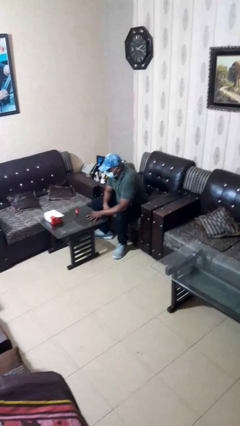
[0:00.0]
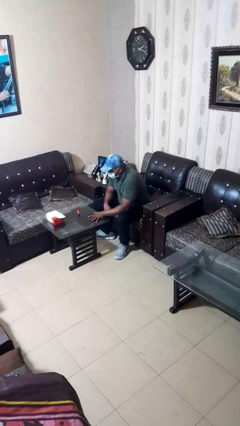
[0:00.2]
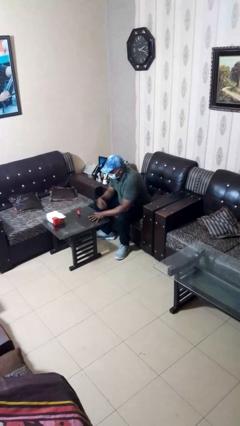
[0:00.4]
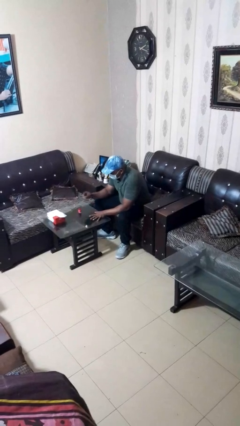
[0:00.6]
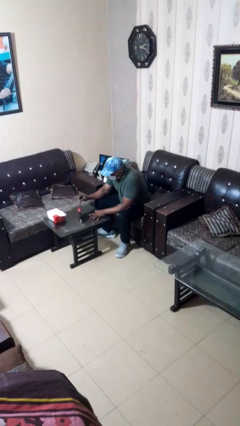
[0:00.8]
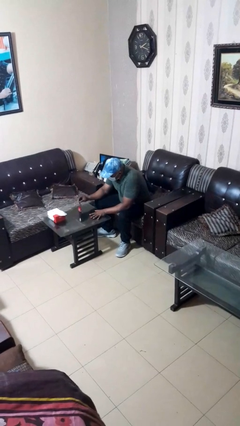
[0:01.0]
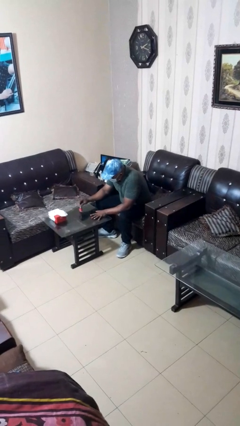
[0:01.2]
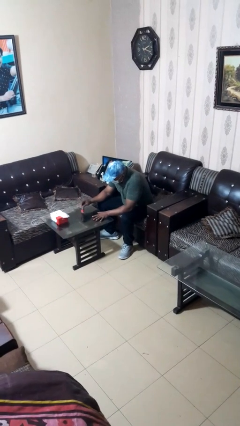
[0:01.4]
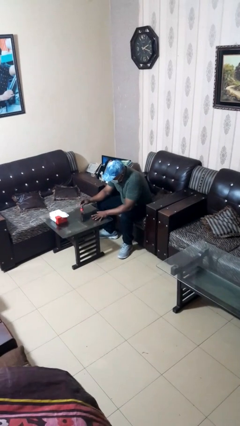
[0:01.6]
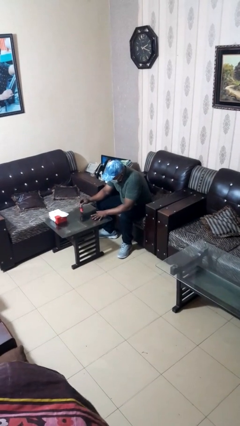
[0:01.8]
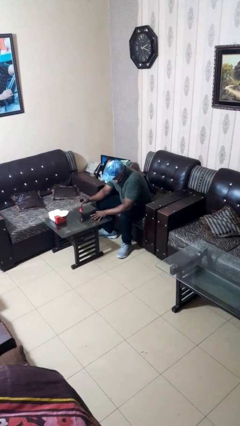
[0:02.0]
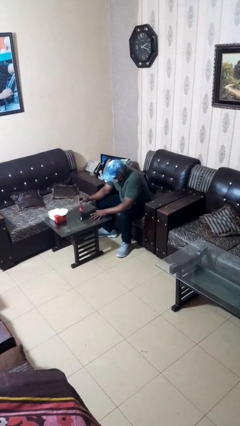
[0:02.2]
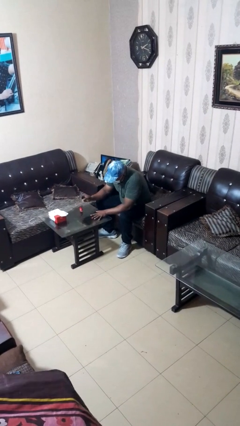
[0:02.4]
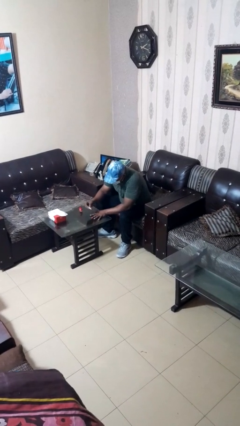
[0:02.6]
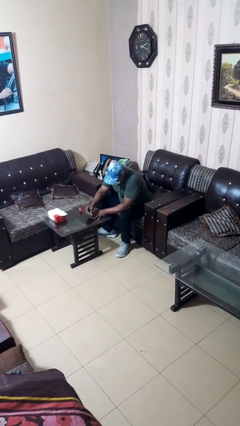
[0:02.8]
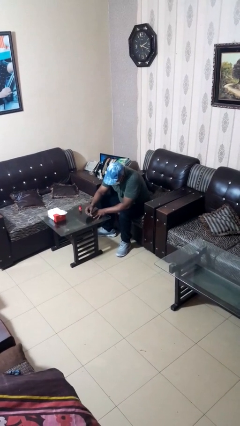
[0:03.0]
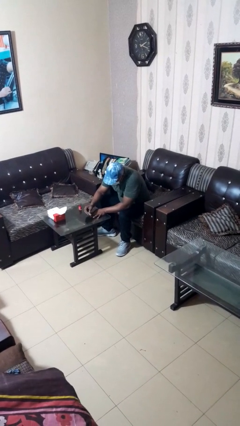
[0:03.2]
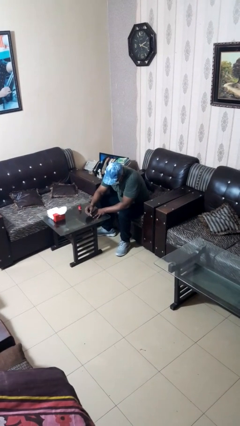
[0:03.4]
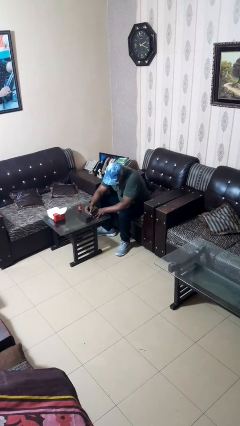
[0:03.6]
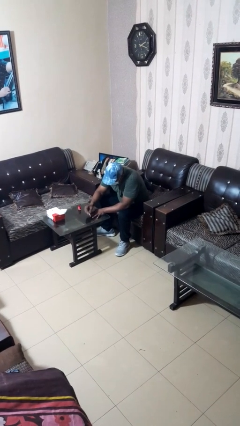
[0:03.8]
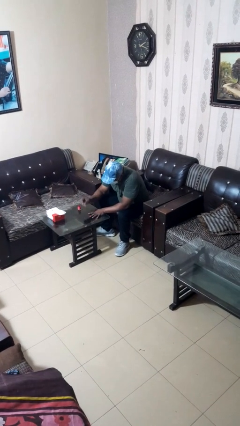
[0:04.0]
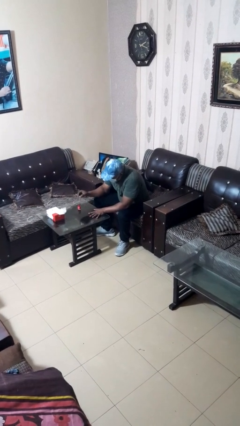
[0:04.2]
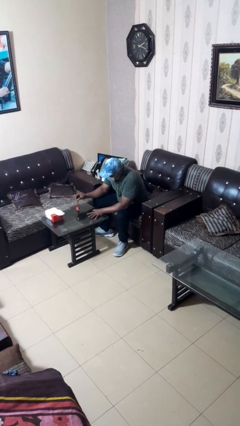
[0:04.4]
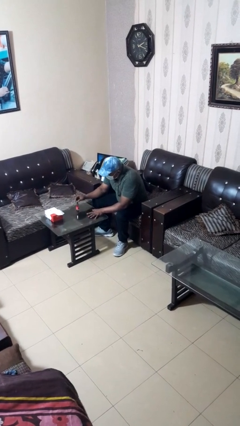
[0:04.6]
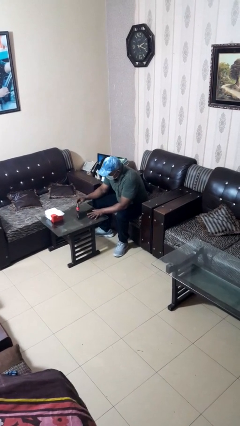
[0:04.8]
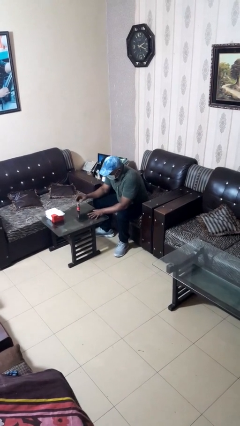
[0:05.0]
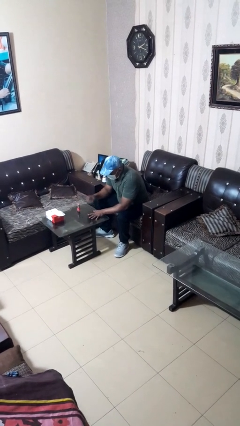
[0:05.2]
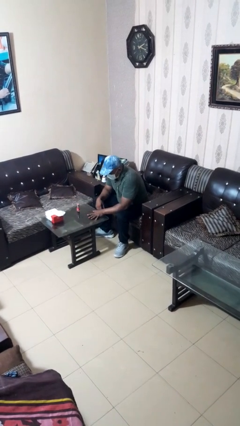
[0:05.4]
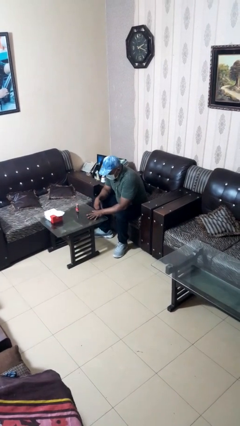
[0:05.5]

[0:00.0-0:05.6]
person paints fingernails

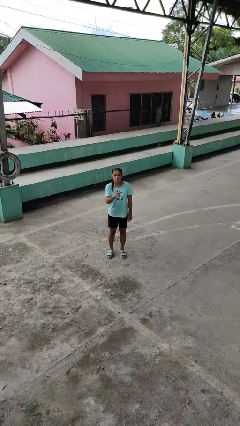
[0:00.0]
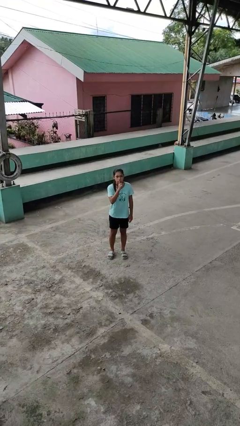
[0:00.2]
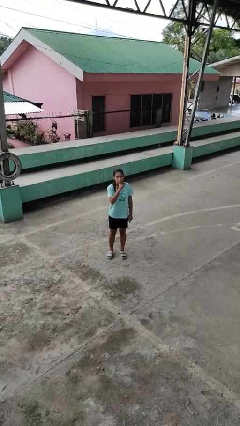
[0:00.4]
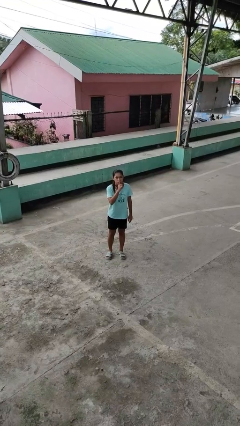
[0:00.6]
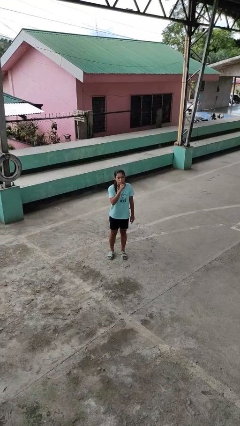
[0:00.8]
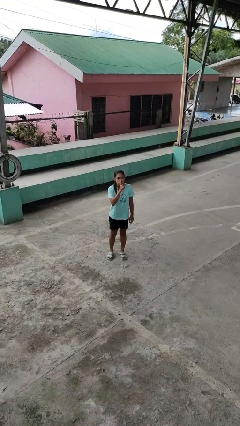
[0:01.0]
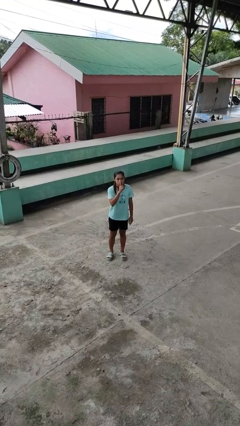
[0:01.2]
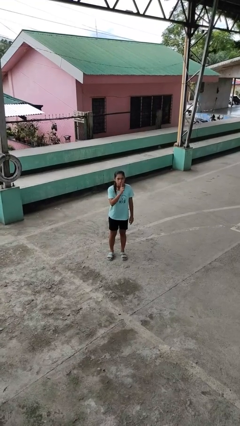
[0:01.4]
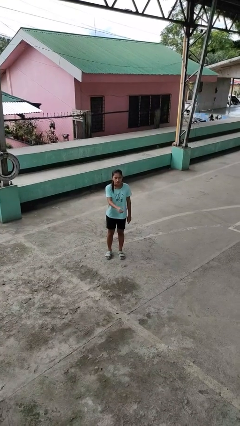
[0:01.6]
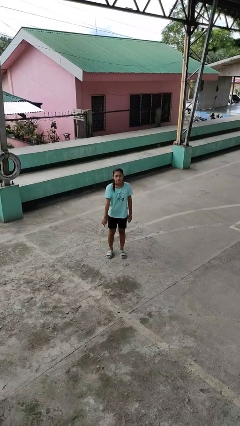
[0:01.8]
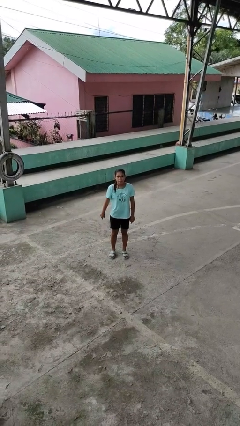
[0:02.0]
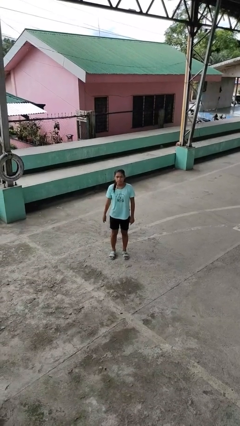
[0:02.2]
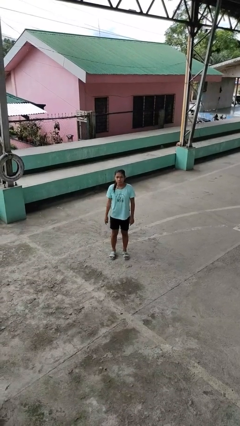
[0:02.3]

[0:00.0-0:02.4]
person gestures be quiet

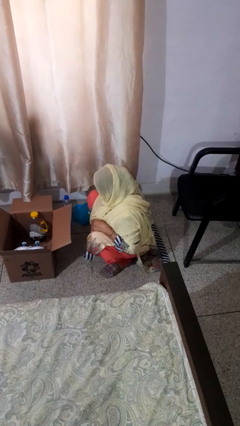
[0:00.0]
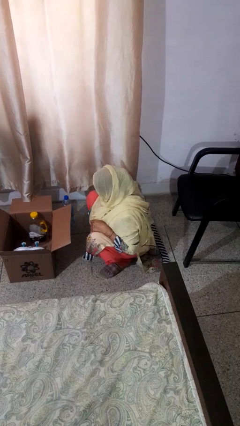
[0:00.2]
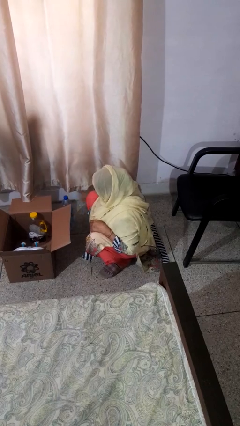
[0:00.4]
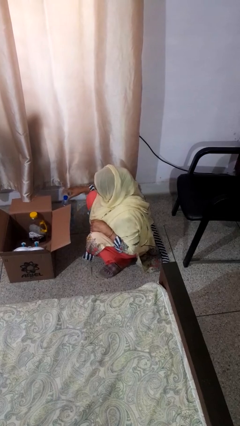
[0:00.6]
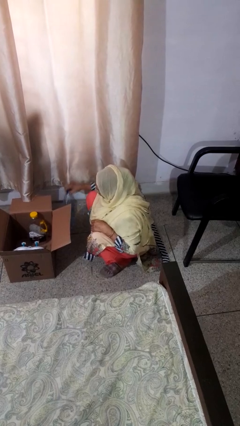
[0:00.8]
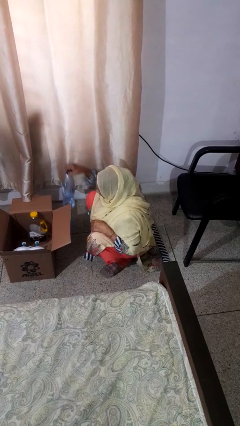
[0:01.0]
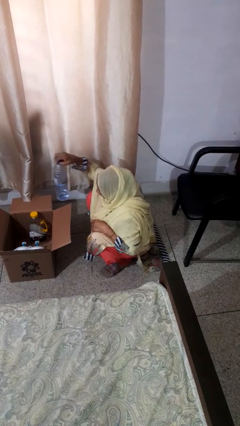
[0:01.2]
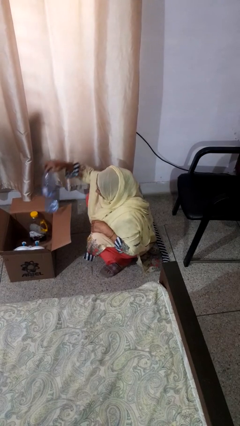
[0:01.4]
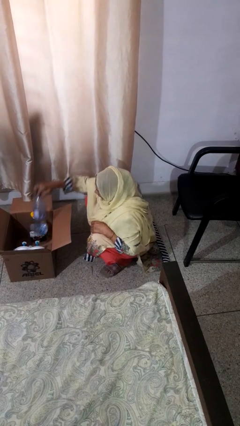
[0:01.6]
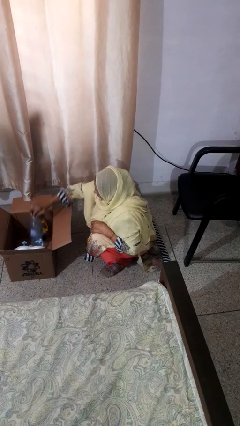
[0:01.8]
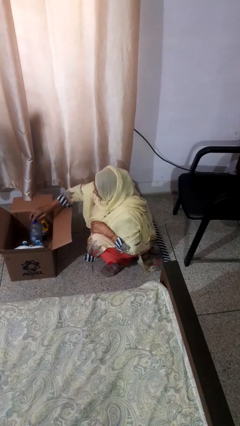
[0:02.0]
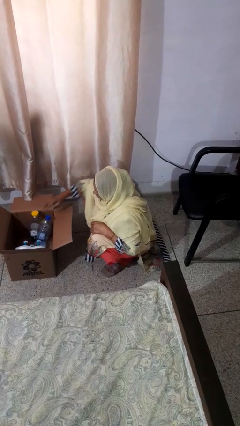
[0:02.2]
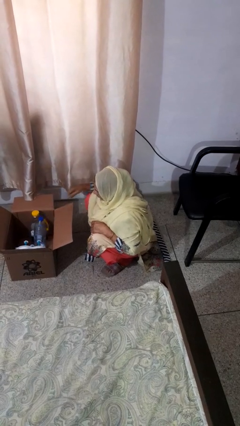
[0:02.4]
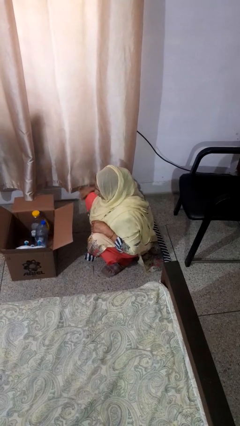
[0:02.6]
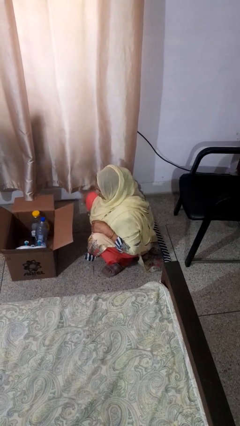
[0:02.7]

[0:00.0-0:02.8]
person puts object into box

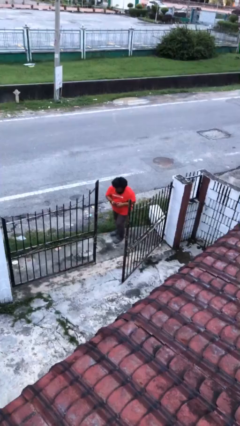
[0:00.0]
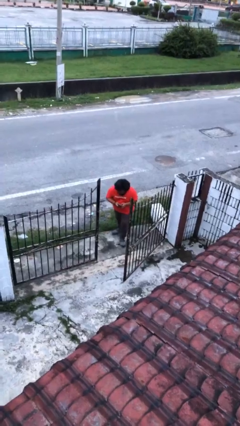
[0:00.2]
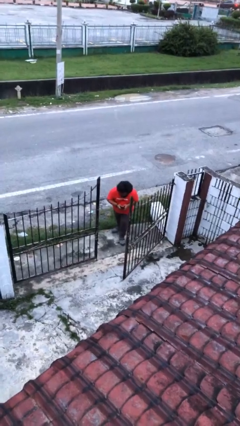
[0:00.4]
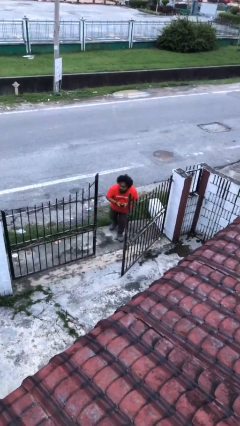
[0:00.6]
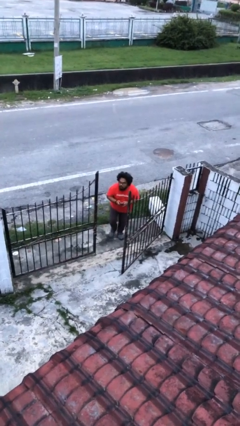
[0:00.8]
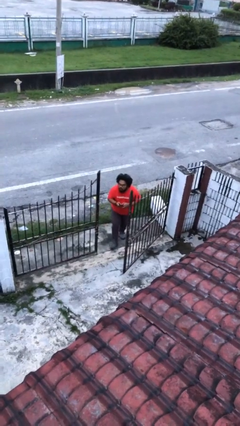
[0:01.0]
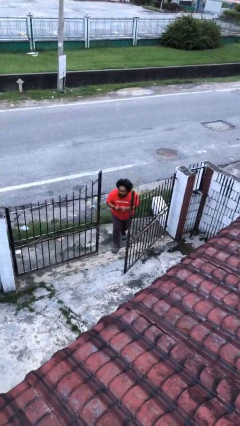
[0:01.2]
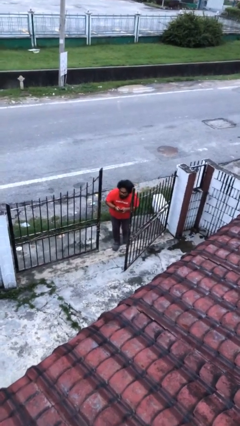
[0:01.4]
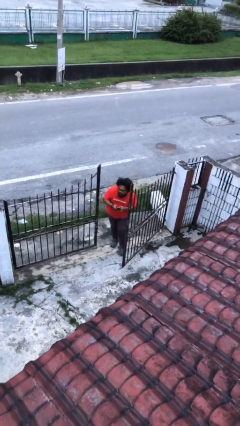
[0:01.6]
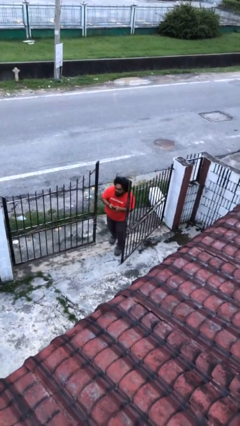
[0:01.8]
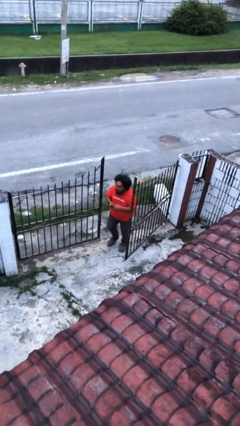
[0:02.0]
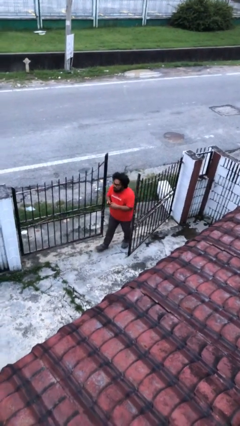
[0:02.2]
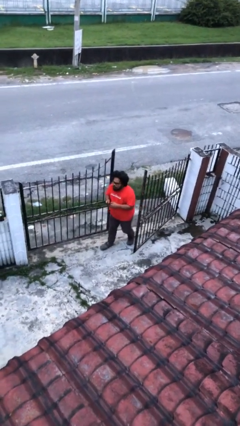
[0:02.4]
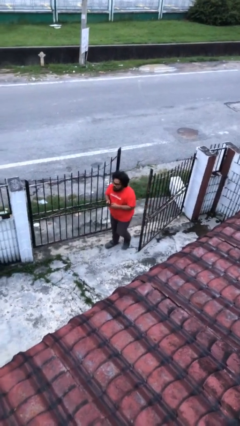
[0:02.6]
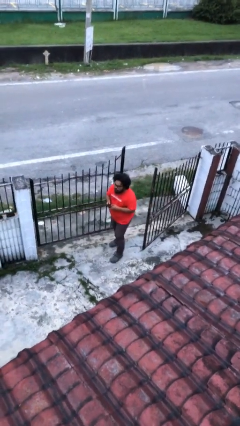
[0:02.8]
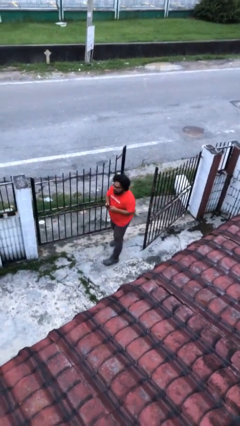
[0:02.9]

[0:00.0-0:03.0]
person enters scene through structure

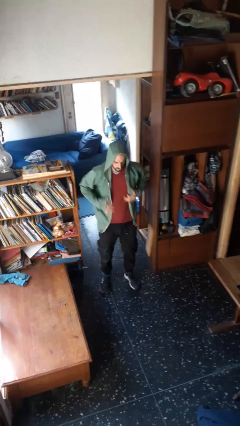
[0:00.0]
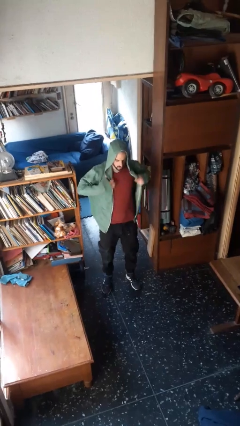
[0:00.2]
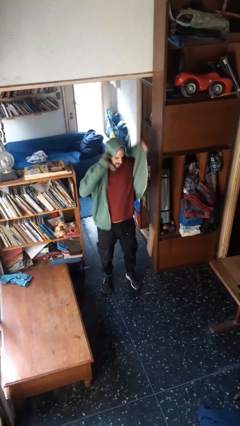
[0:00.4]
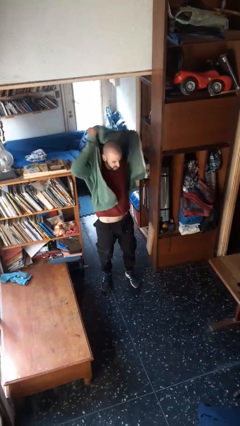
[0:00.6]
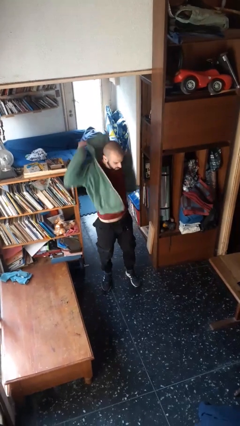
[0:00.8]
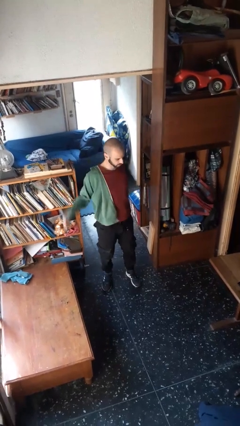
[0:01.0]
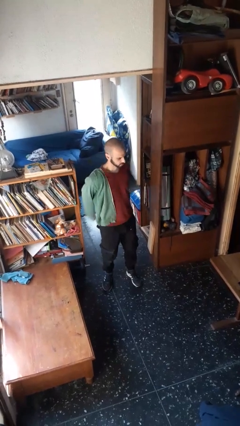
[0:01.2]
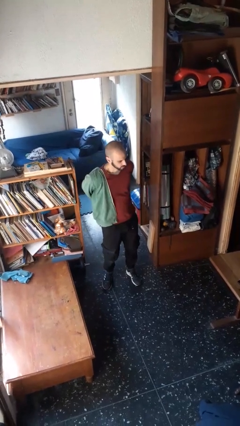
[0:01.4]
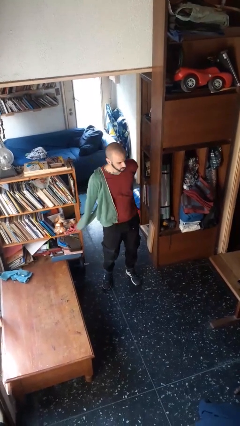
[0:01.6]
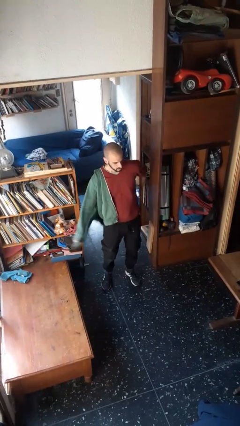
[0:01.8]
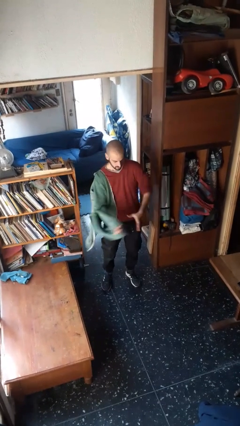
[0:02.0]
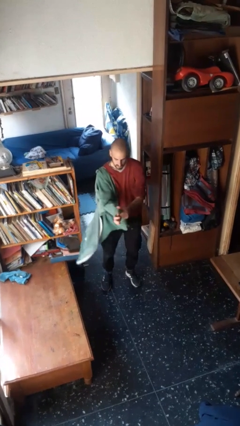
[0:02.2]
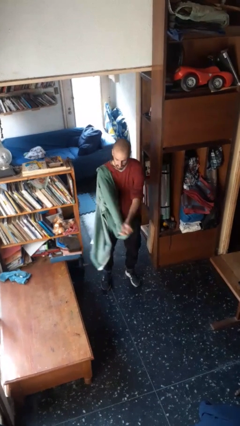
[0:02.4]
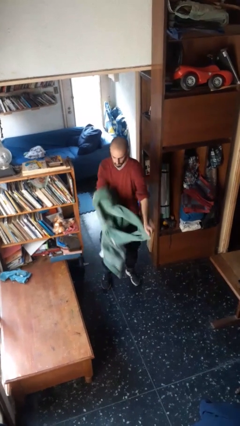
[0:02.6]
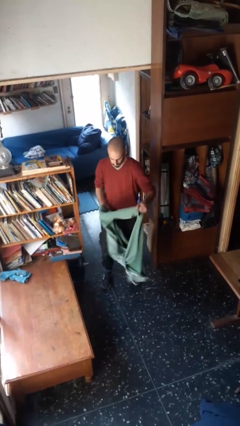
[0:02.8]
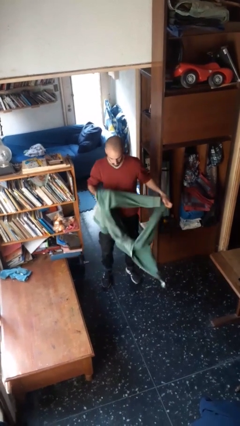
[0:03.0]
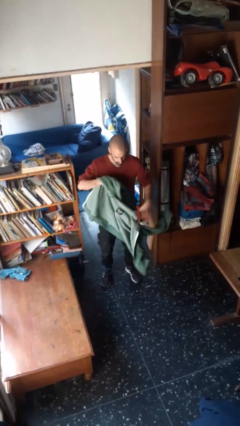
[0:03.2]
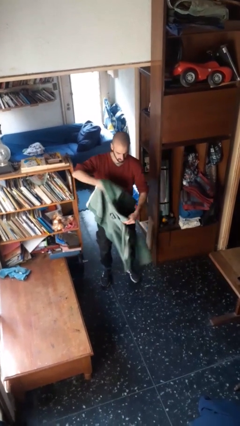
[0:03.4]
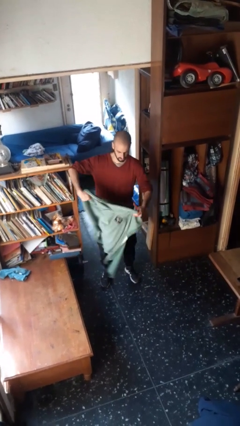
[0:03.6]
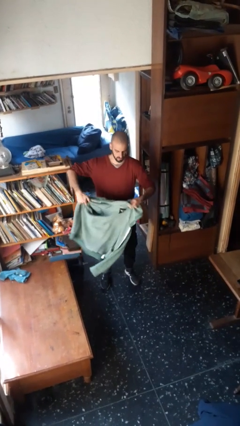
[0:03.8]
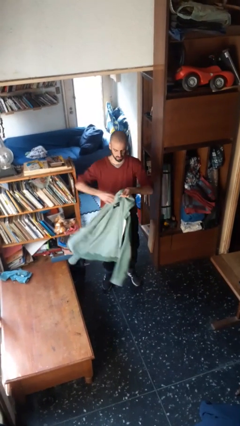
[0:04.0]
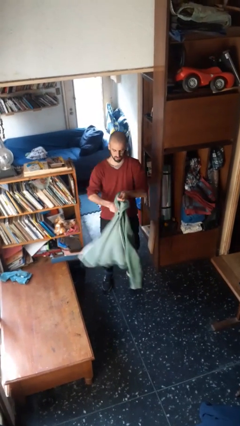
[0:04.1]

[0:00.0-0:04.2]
person takes off hoodie
